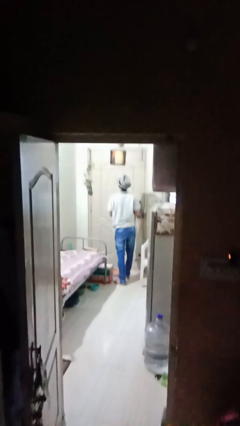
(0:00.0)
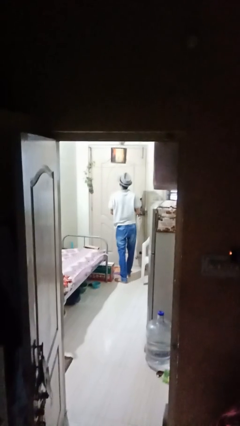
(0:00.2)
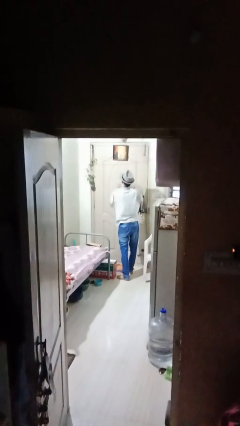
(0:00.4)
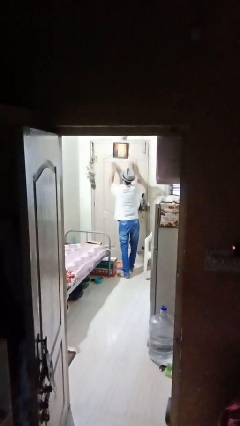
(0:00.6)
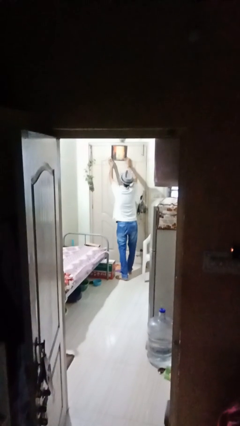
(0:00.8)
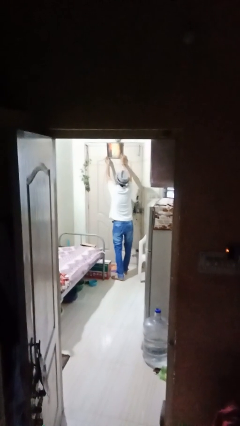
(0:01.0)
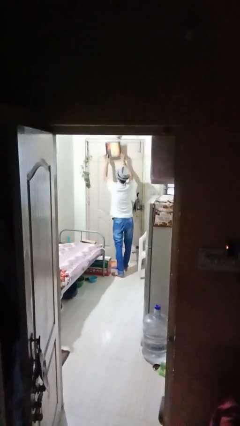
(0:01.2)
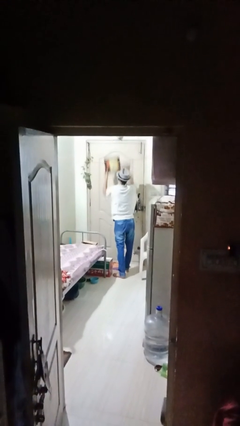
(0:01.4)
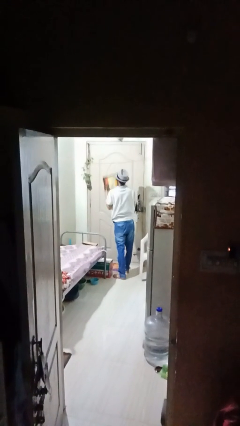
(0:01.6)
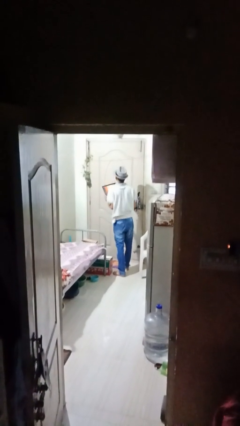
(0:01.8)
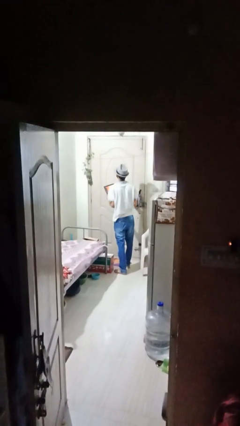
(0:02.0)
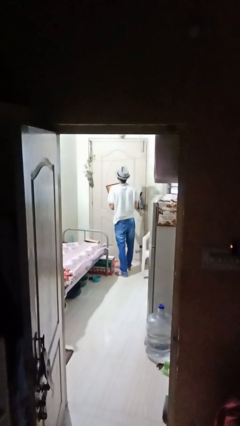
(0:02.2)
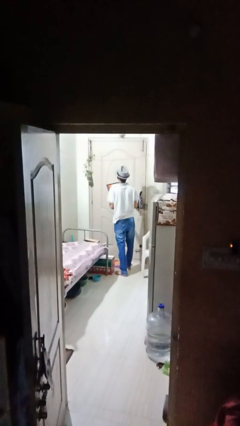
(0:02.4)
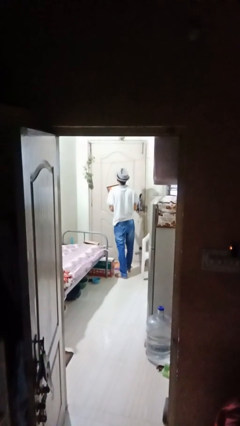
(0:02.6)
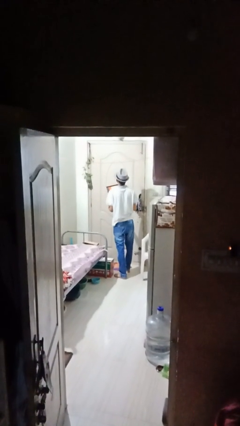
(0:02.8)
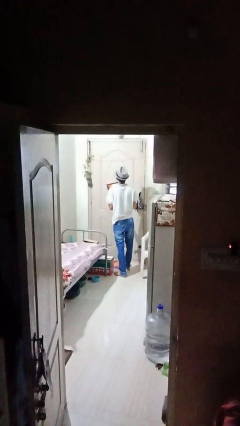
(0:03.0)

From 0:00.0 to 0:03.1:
person takes down picture frame

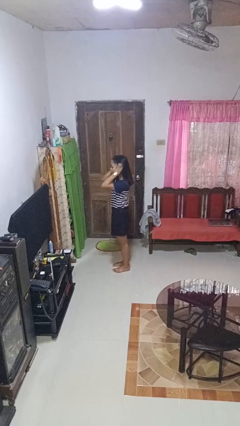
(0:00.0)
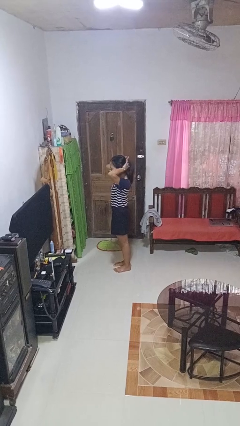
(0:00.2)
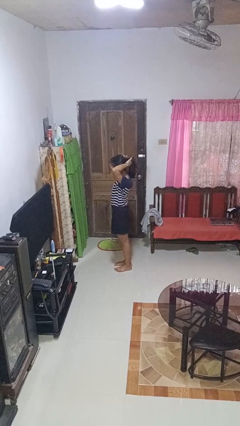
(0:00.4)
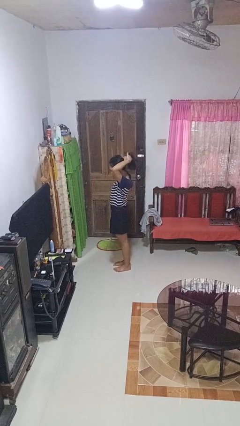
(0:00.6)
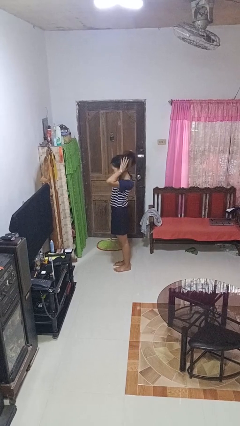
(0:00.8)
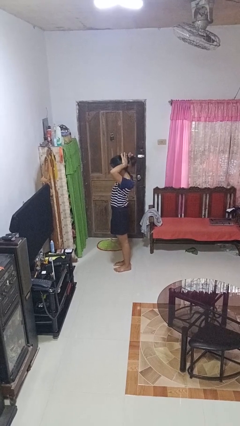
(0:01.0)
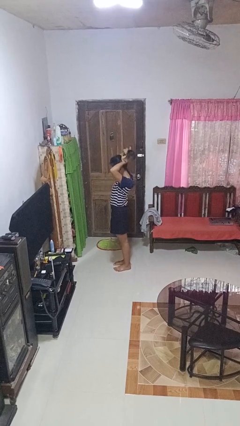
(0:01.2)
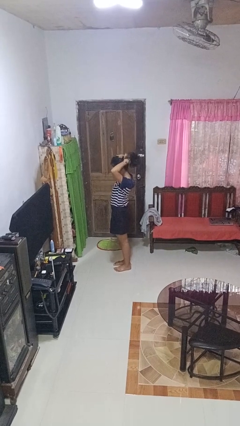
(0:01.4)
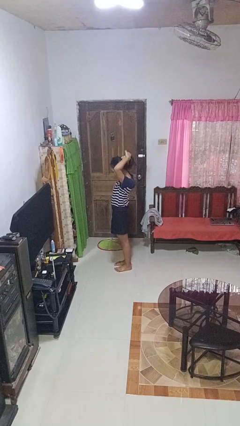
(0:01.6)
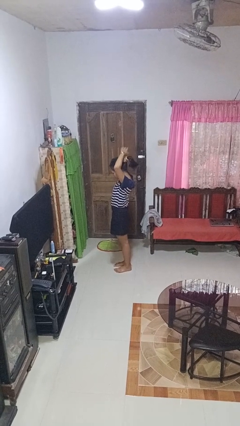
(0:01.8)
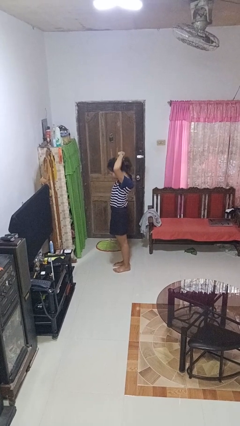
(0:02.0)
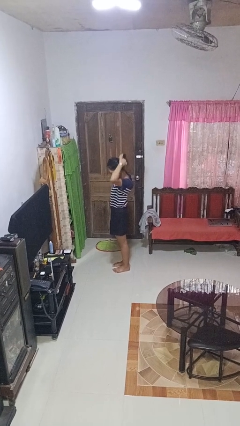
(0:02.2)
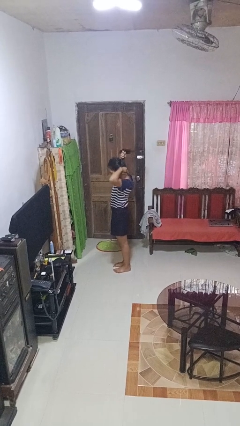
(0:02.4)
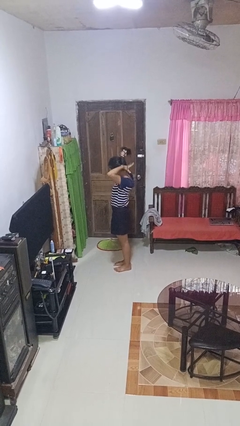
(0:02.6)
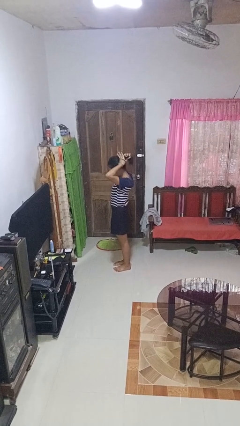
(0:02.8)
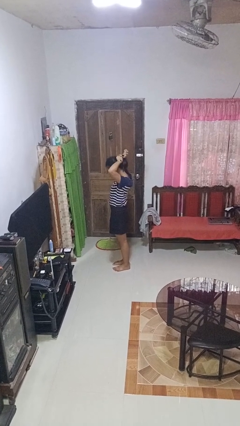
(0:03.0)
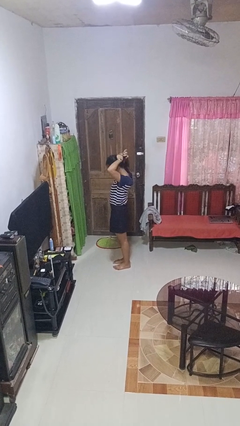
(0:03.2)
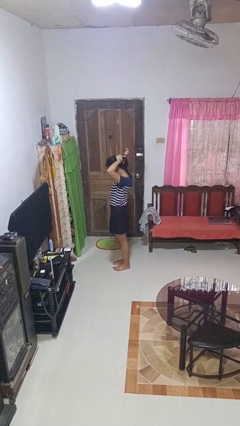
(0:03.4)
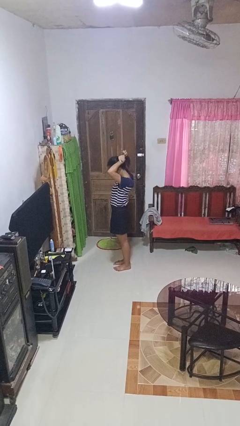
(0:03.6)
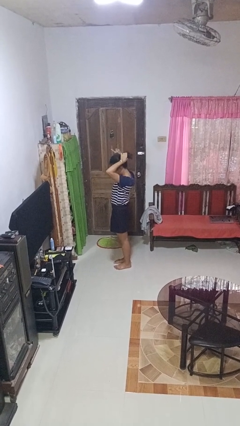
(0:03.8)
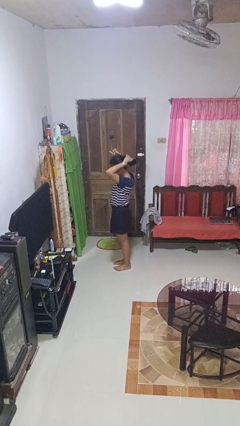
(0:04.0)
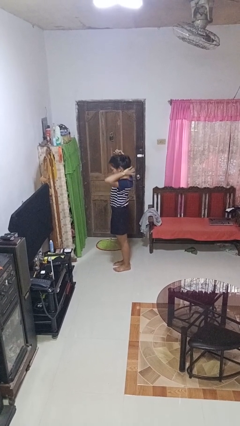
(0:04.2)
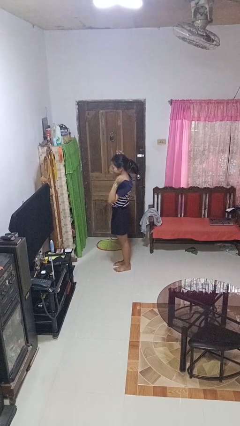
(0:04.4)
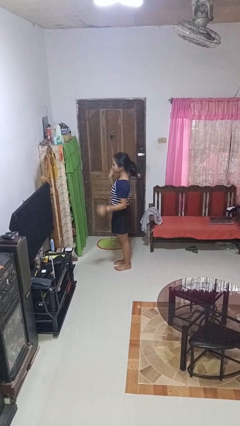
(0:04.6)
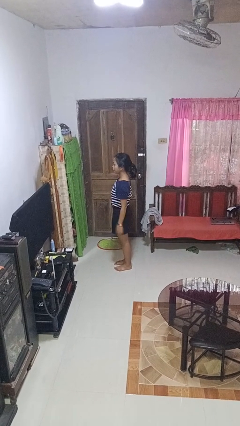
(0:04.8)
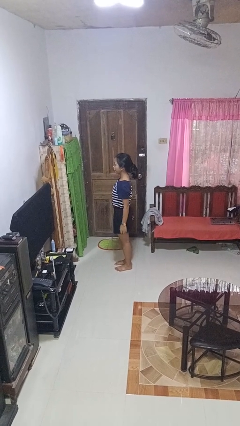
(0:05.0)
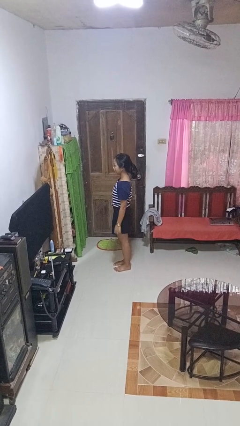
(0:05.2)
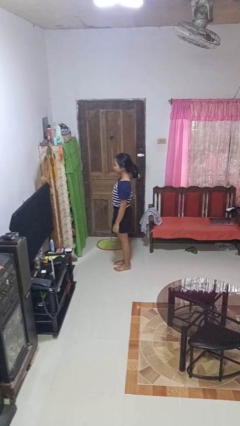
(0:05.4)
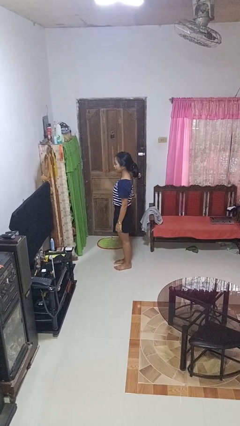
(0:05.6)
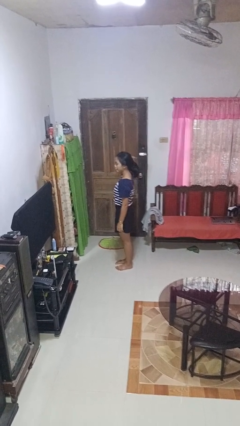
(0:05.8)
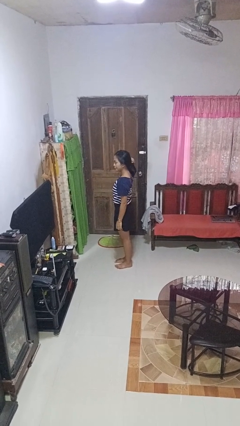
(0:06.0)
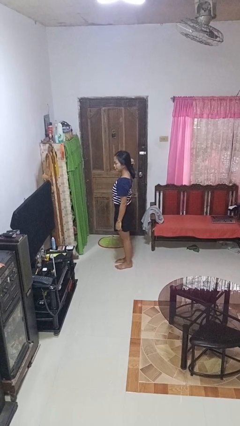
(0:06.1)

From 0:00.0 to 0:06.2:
person puts hair in ponytail

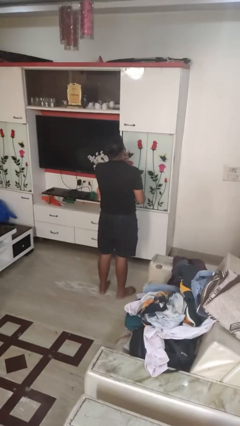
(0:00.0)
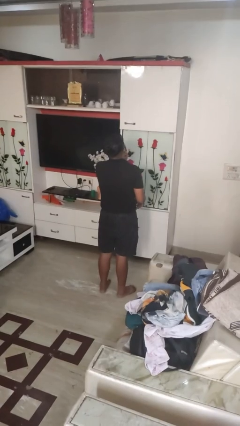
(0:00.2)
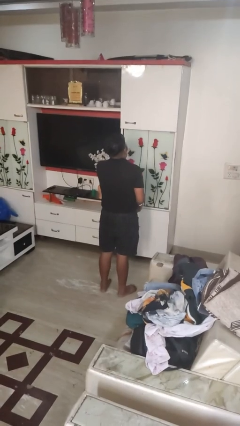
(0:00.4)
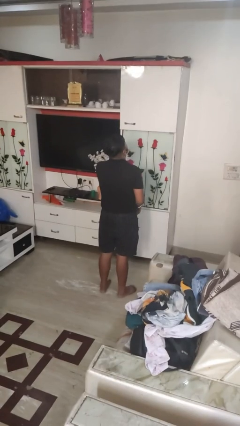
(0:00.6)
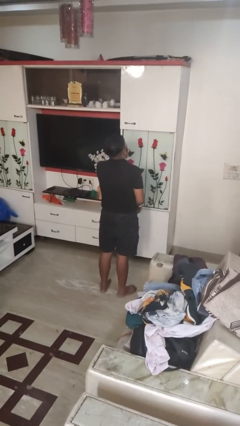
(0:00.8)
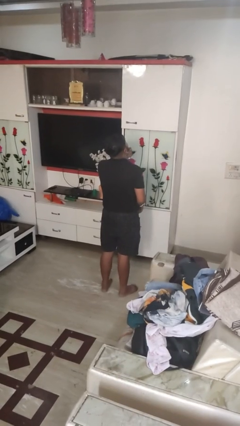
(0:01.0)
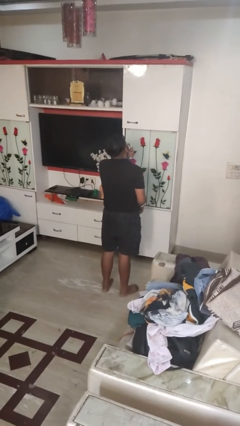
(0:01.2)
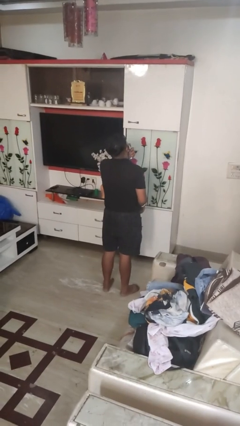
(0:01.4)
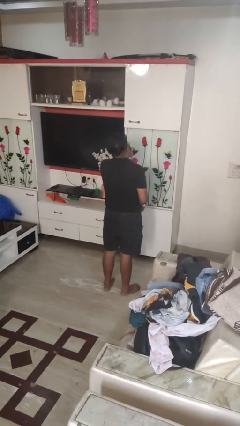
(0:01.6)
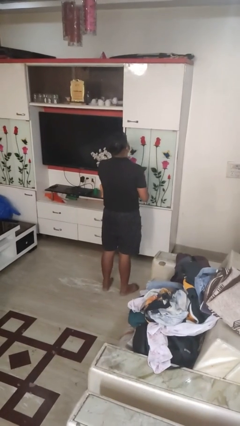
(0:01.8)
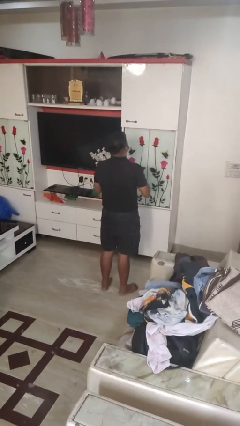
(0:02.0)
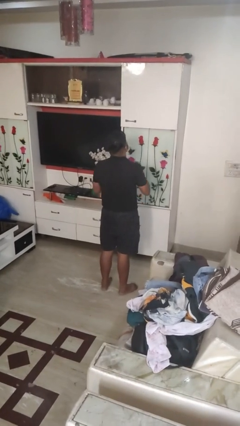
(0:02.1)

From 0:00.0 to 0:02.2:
person applies shaving cream

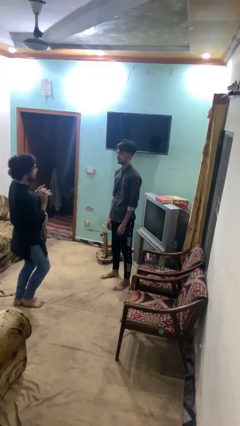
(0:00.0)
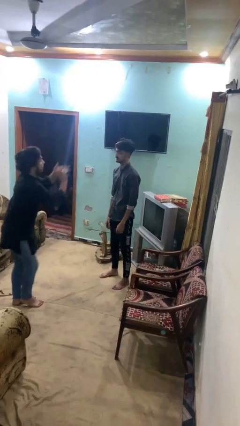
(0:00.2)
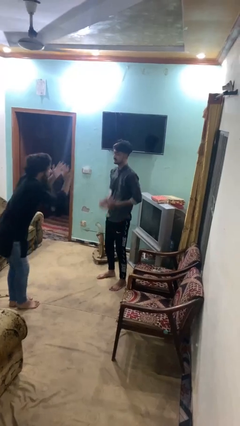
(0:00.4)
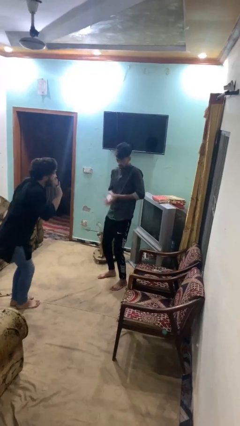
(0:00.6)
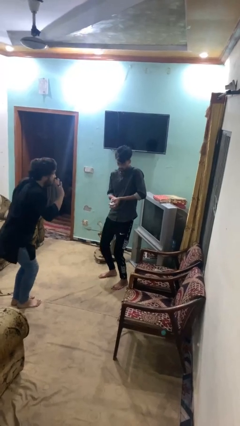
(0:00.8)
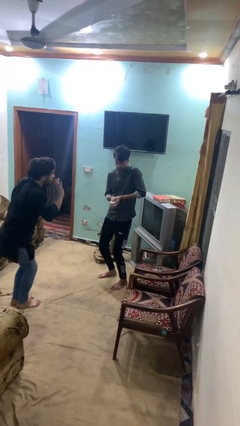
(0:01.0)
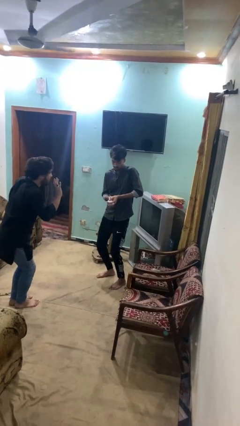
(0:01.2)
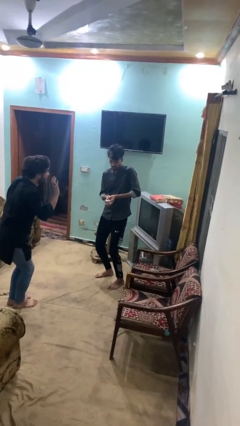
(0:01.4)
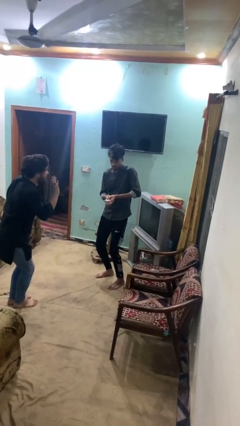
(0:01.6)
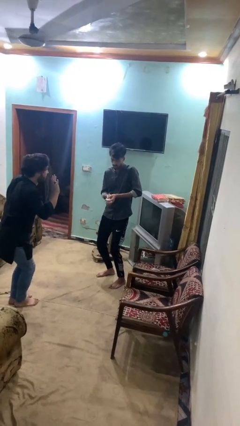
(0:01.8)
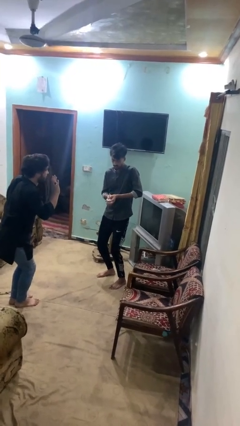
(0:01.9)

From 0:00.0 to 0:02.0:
person catches object from person

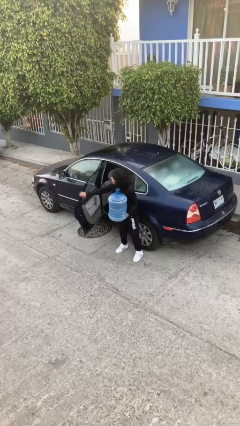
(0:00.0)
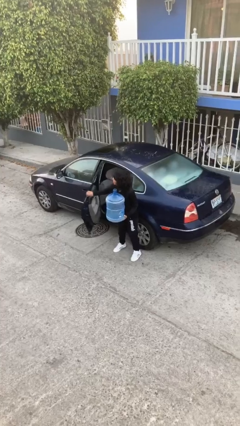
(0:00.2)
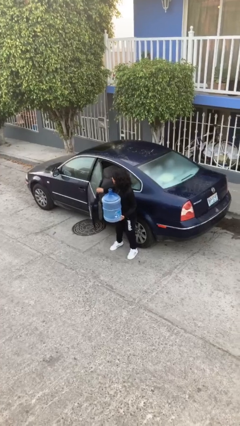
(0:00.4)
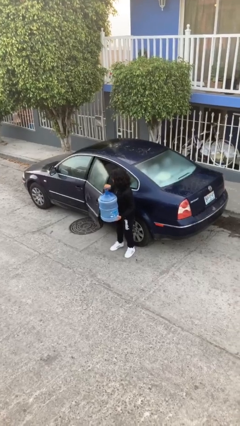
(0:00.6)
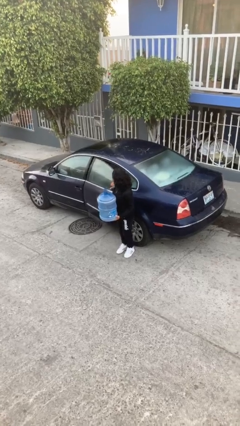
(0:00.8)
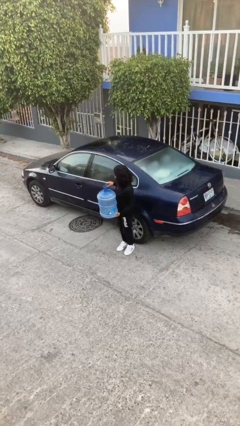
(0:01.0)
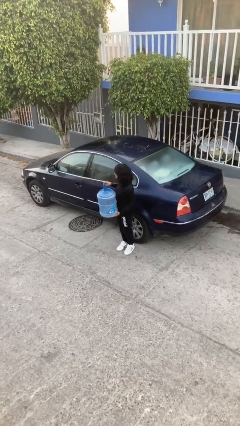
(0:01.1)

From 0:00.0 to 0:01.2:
person closes car door

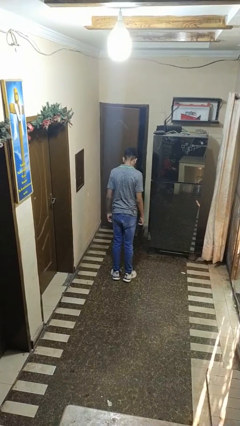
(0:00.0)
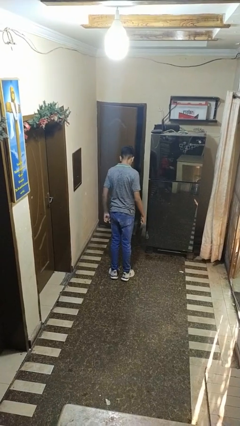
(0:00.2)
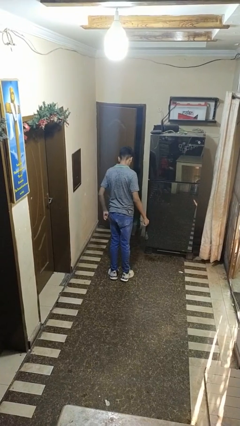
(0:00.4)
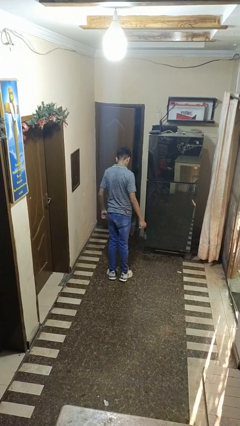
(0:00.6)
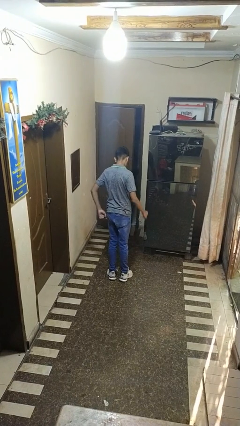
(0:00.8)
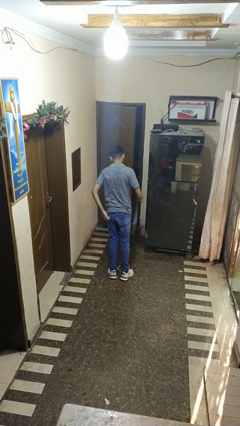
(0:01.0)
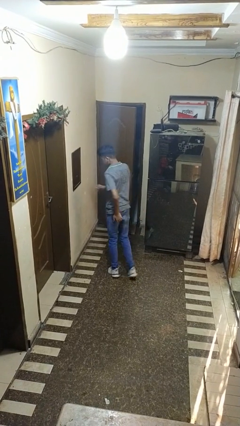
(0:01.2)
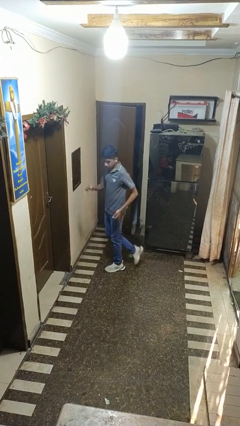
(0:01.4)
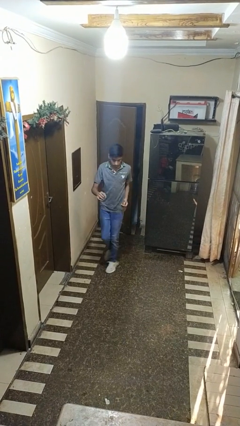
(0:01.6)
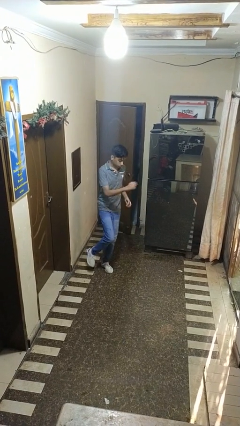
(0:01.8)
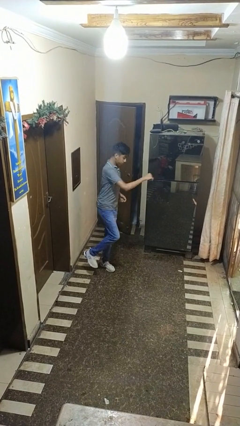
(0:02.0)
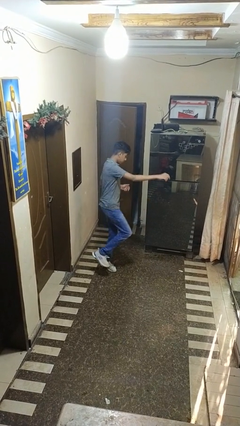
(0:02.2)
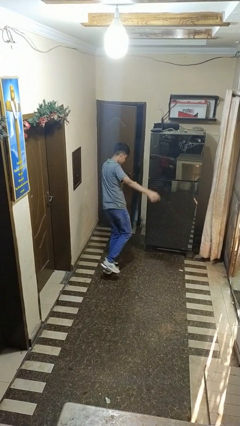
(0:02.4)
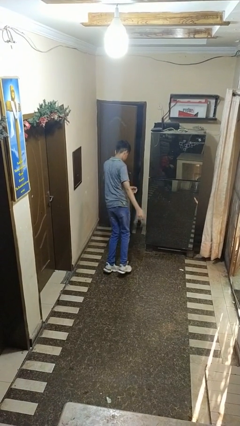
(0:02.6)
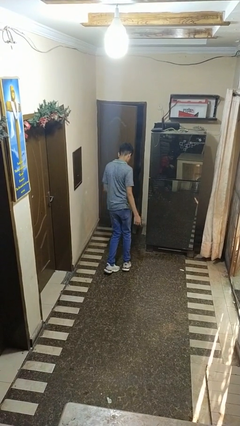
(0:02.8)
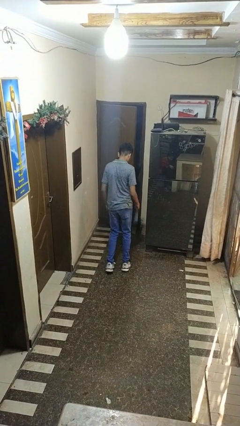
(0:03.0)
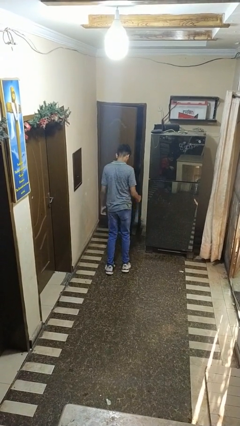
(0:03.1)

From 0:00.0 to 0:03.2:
person twirls
